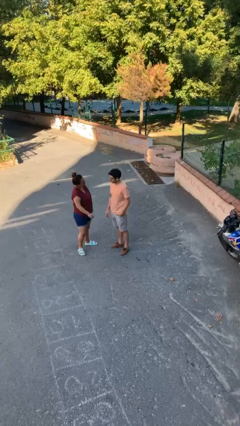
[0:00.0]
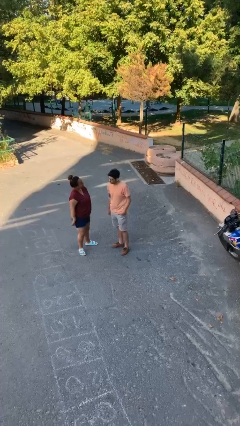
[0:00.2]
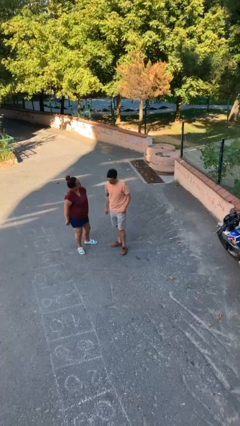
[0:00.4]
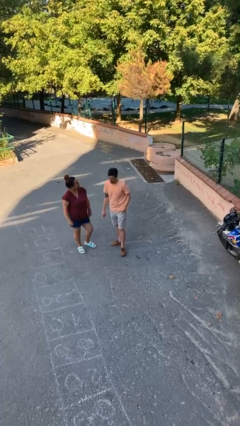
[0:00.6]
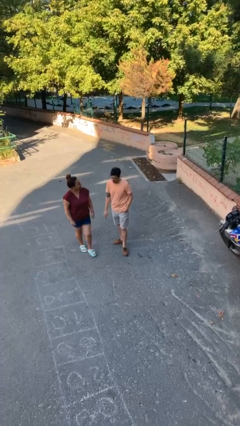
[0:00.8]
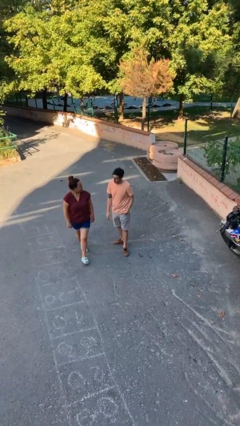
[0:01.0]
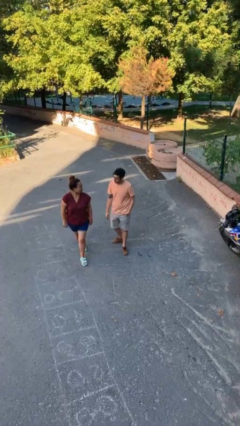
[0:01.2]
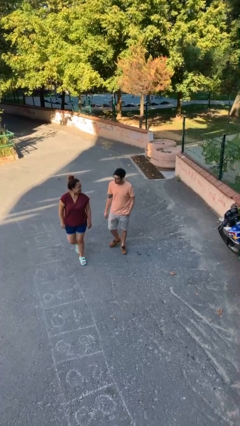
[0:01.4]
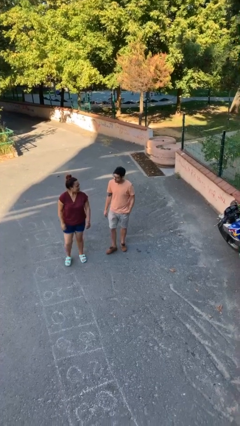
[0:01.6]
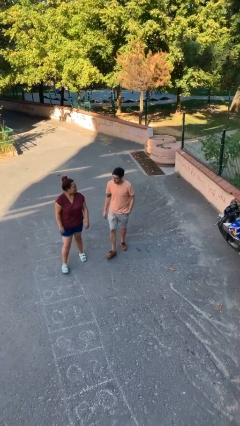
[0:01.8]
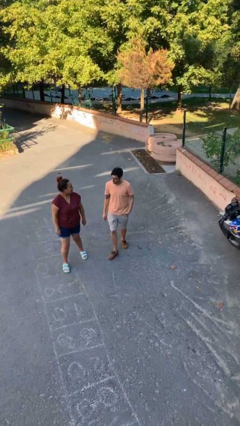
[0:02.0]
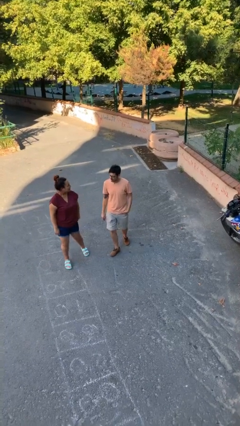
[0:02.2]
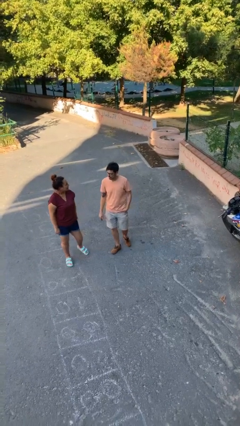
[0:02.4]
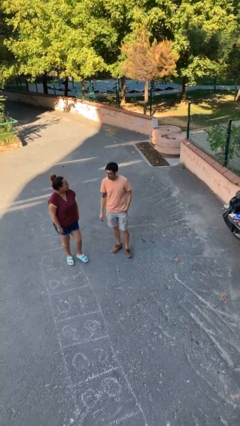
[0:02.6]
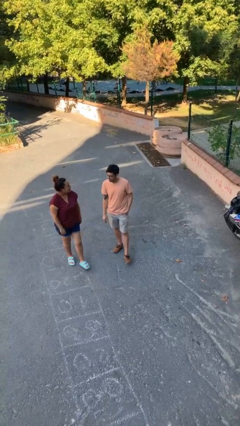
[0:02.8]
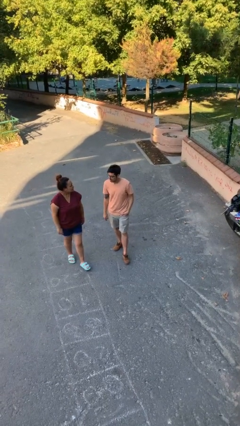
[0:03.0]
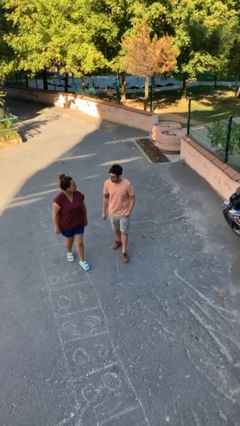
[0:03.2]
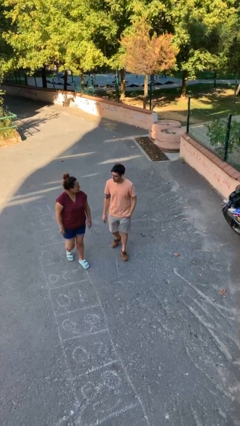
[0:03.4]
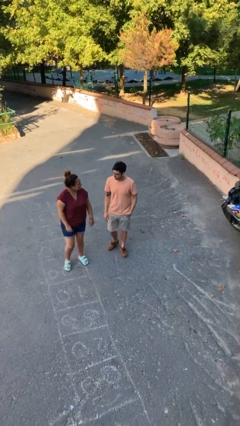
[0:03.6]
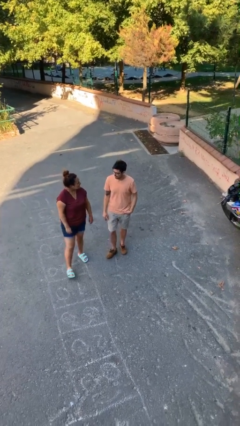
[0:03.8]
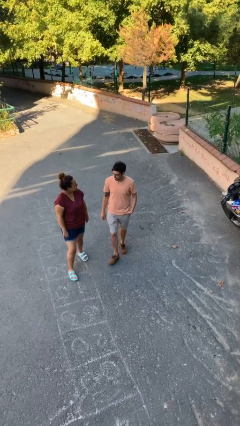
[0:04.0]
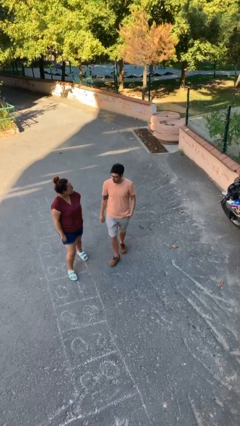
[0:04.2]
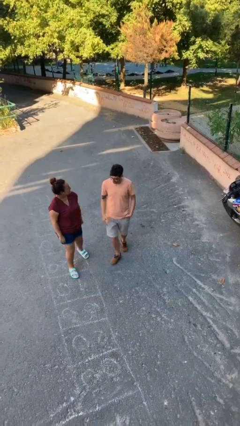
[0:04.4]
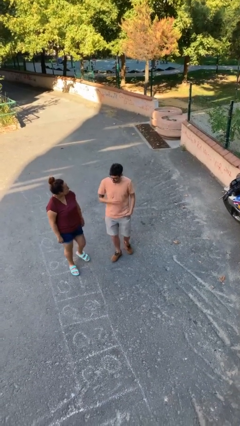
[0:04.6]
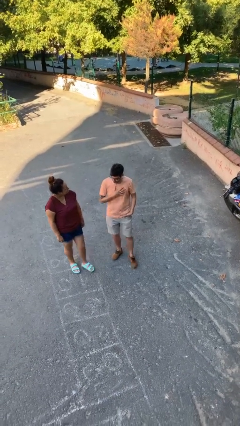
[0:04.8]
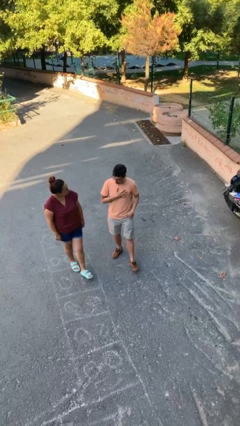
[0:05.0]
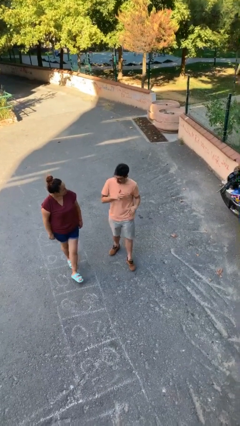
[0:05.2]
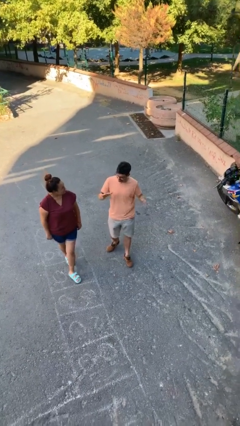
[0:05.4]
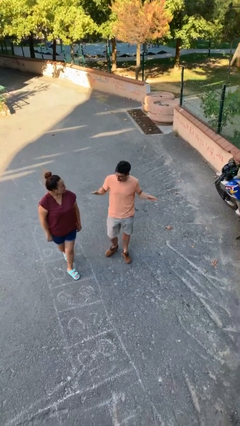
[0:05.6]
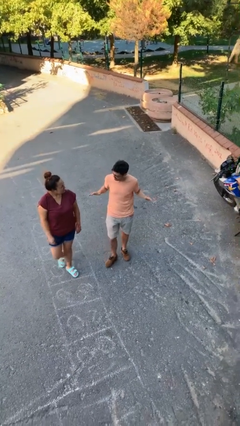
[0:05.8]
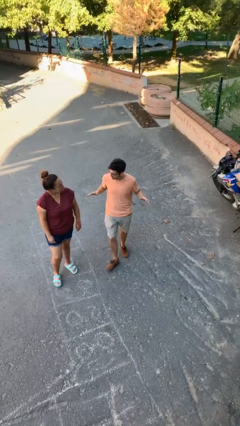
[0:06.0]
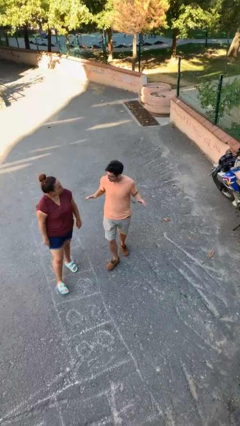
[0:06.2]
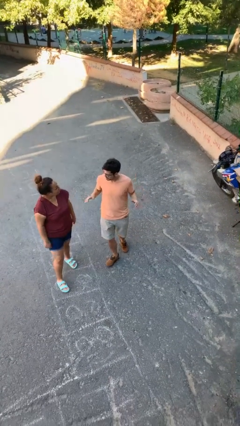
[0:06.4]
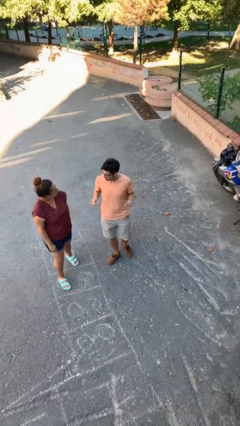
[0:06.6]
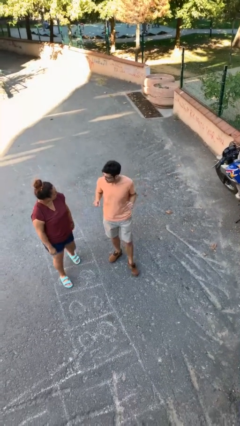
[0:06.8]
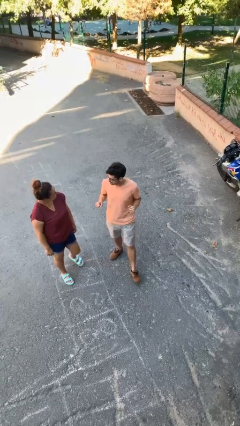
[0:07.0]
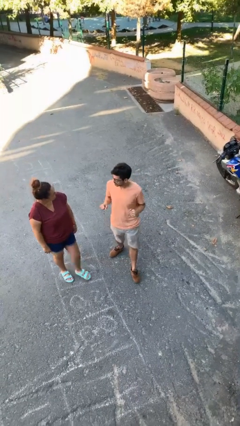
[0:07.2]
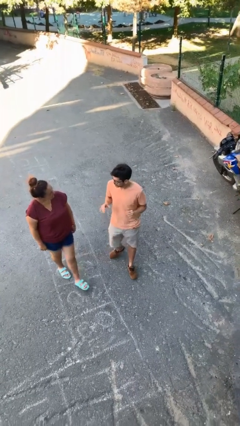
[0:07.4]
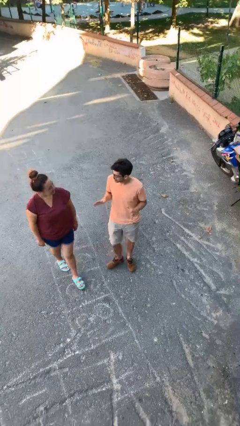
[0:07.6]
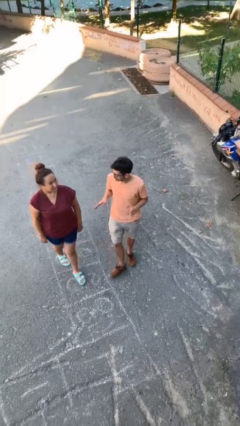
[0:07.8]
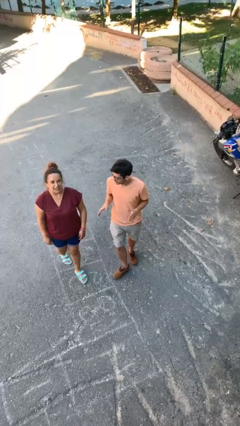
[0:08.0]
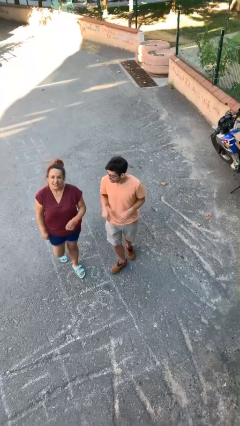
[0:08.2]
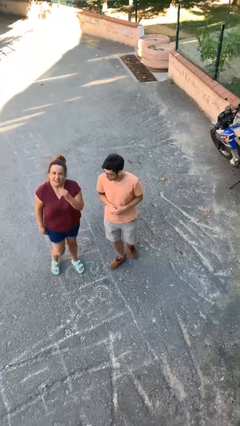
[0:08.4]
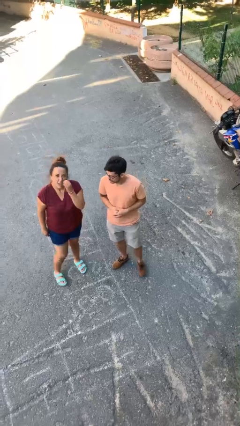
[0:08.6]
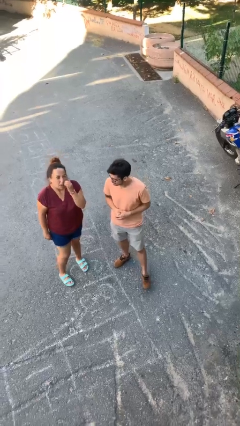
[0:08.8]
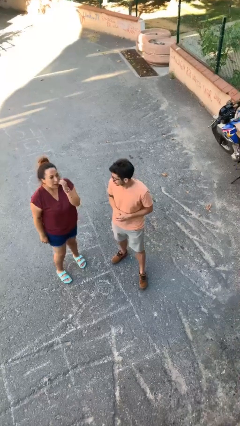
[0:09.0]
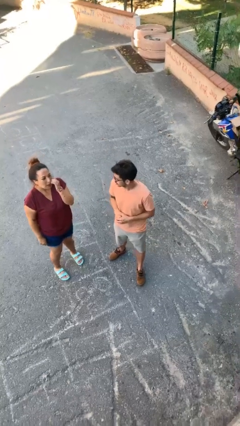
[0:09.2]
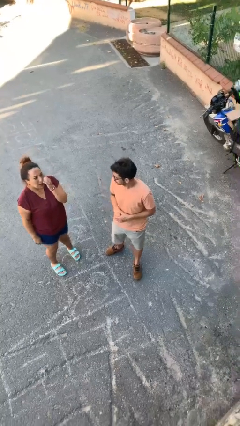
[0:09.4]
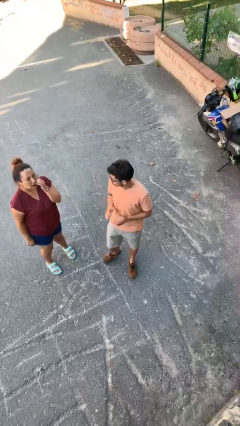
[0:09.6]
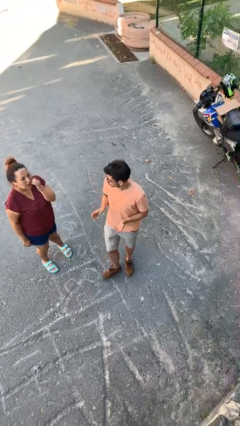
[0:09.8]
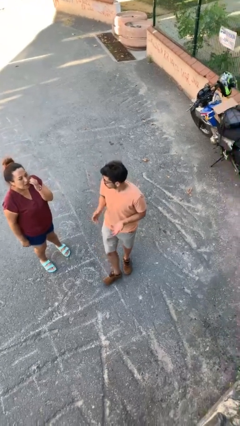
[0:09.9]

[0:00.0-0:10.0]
person talks to person

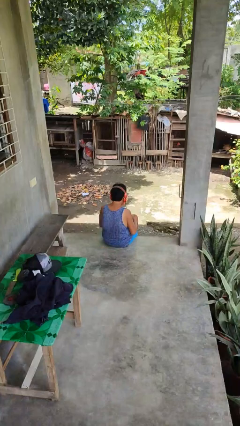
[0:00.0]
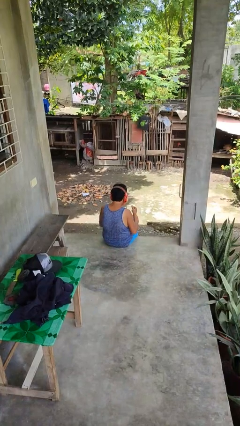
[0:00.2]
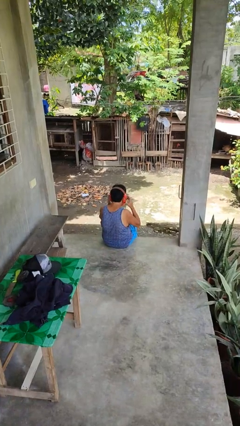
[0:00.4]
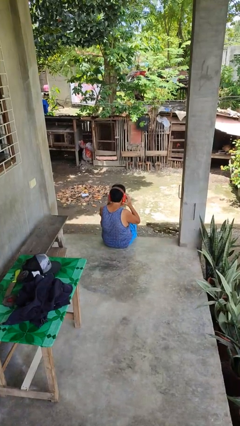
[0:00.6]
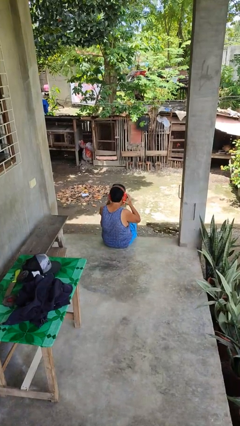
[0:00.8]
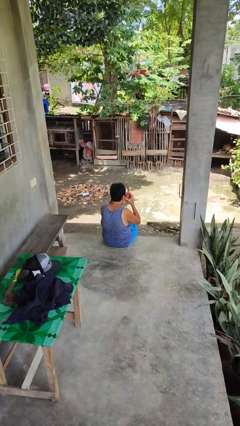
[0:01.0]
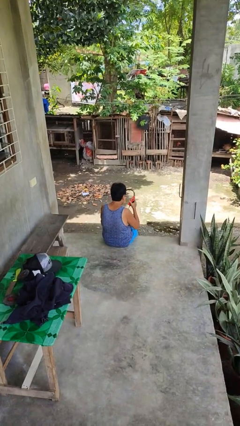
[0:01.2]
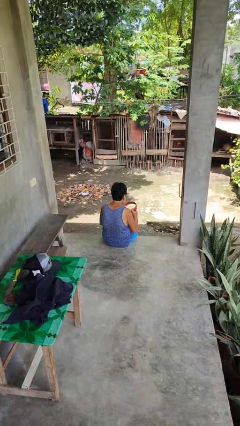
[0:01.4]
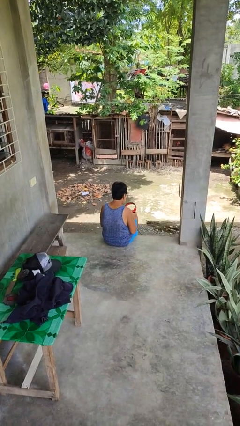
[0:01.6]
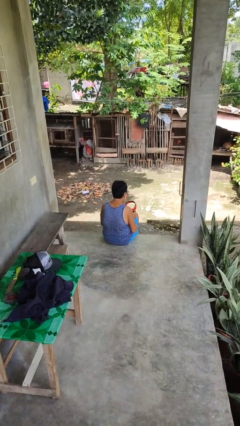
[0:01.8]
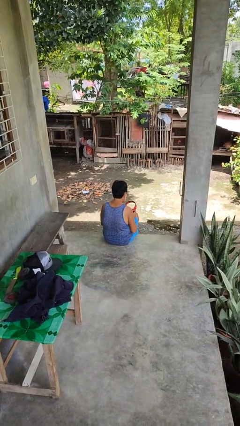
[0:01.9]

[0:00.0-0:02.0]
person takes off headphones

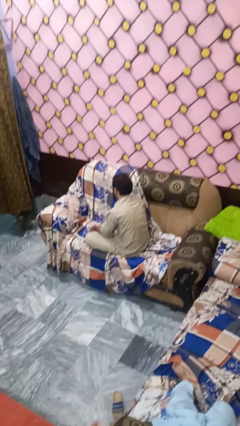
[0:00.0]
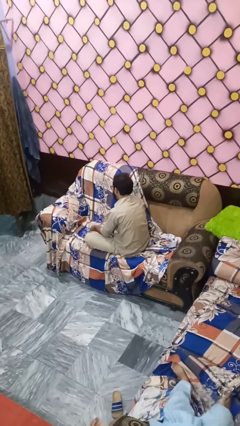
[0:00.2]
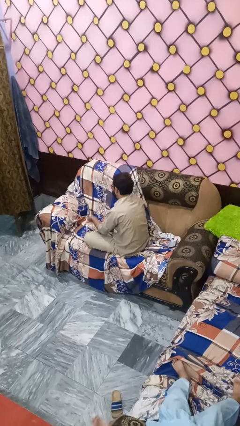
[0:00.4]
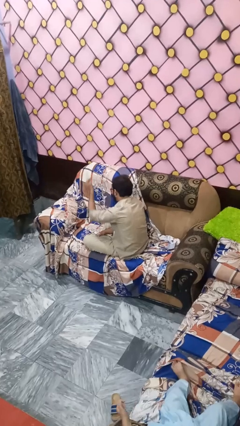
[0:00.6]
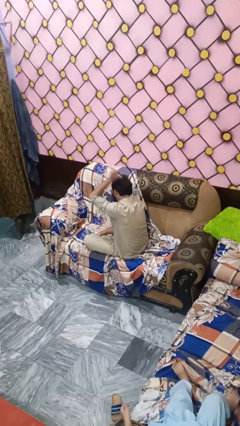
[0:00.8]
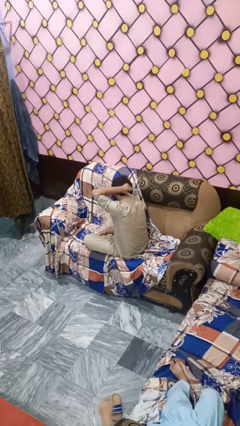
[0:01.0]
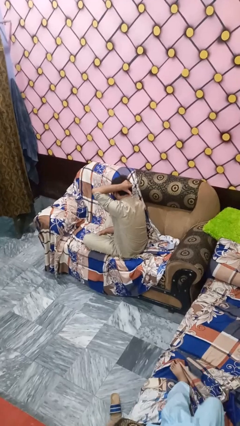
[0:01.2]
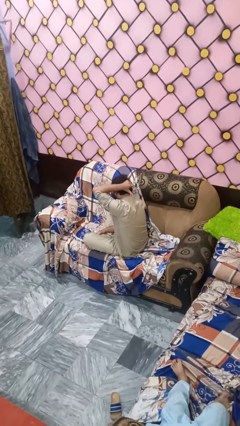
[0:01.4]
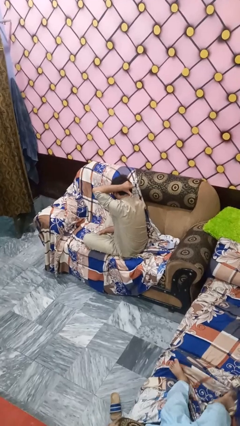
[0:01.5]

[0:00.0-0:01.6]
person gestures behind me

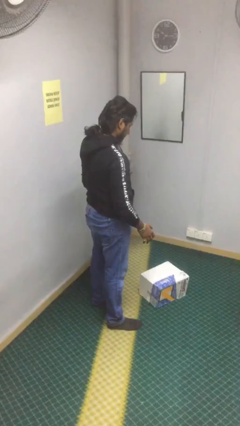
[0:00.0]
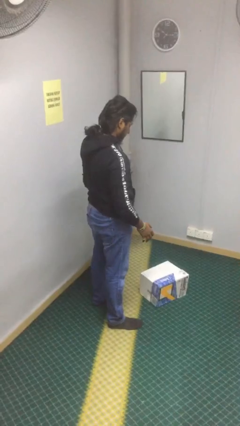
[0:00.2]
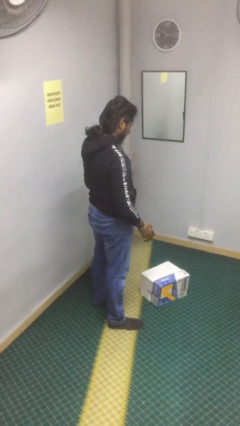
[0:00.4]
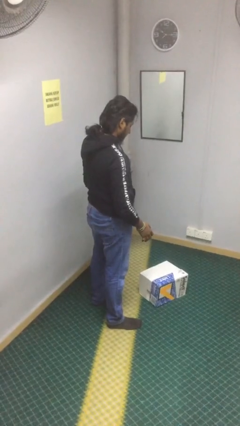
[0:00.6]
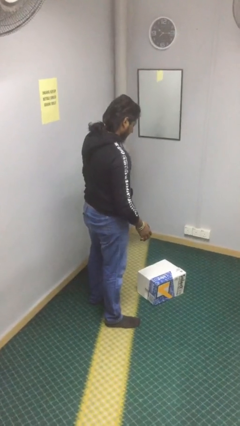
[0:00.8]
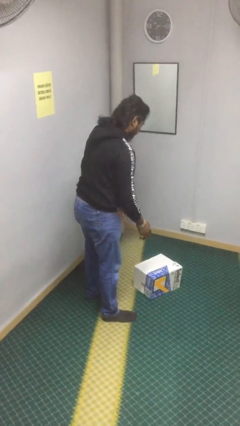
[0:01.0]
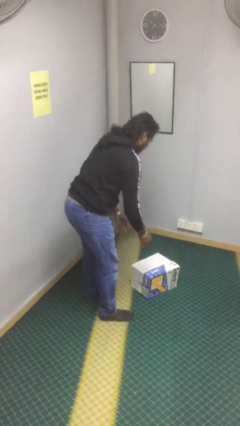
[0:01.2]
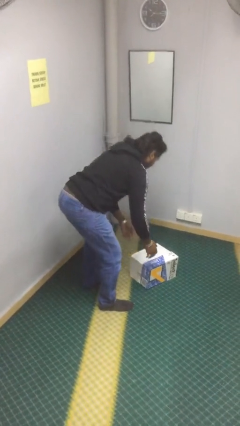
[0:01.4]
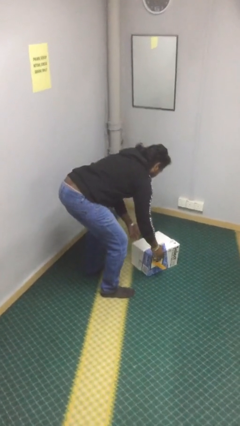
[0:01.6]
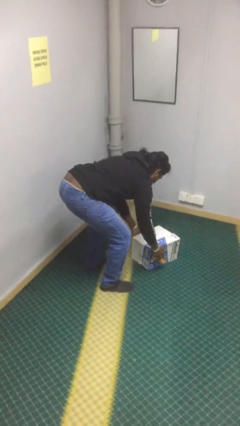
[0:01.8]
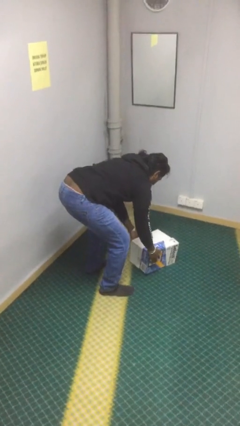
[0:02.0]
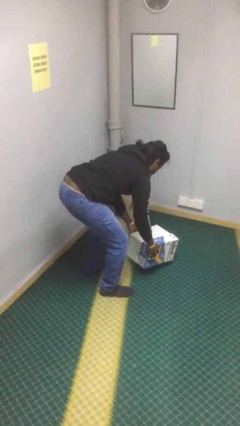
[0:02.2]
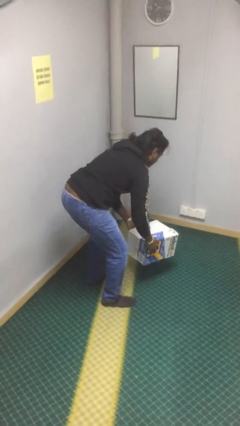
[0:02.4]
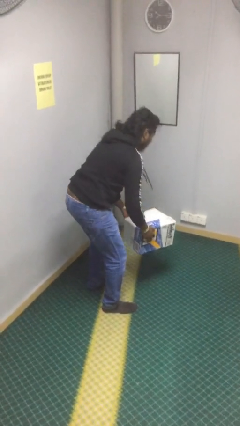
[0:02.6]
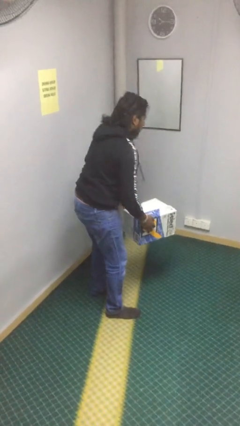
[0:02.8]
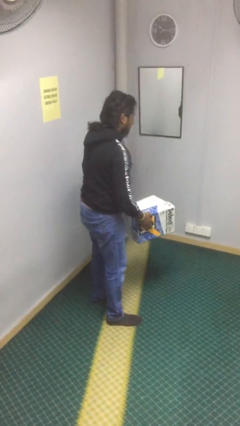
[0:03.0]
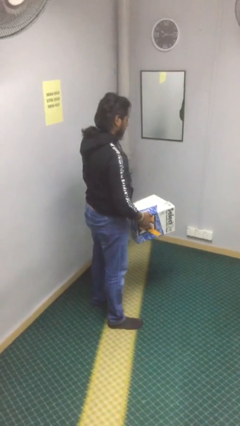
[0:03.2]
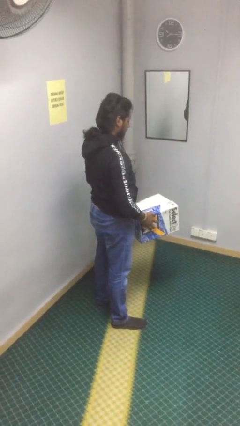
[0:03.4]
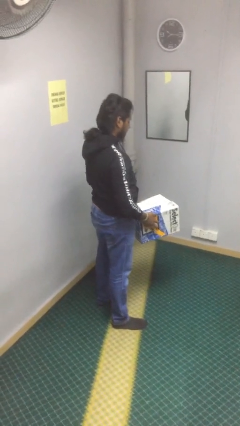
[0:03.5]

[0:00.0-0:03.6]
person picks up object from floor

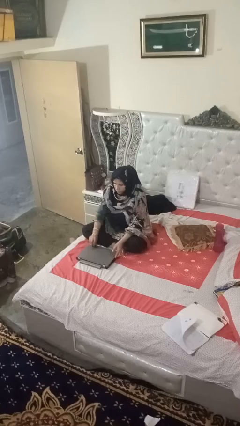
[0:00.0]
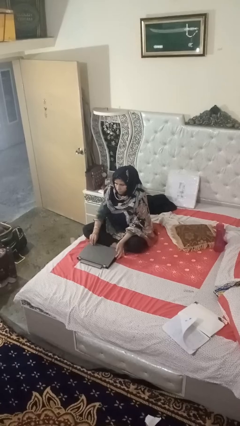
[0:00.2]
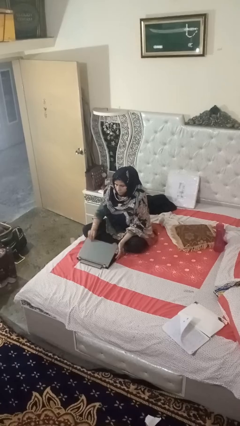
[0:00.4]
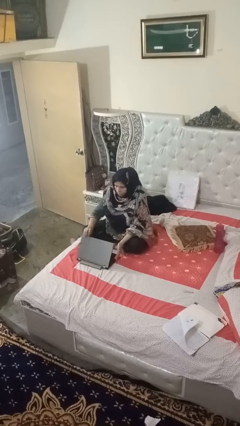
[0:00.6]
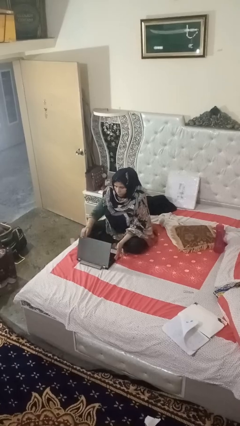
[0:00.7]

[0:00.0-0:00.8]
person opens laptop
